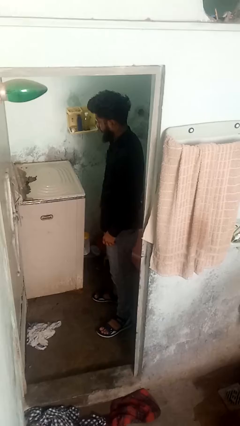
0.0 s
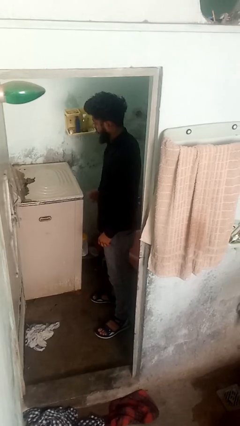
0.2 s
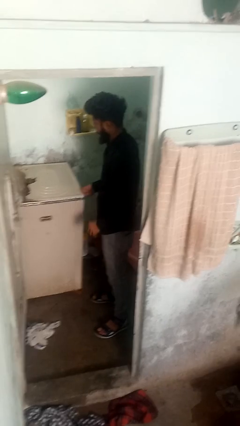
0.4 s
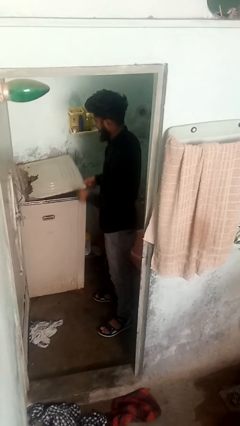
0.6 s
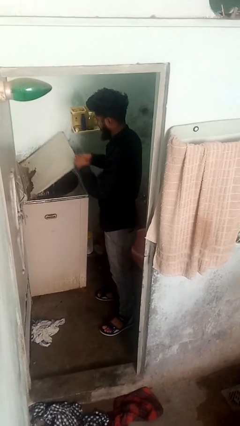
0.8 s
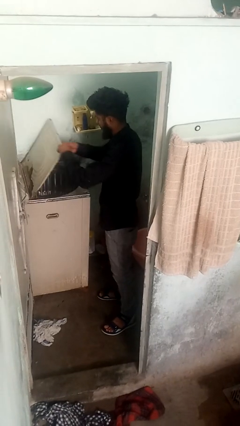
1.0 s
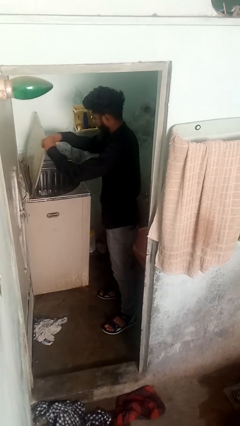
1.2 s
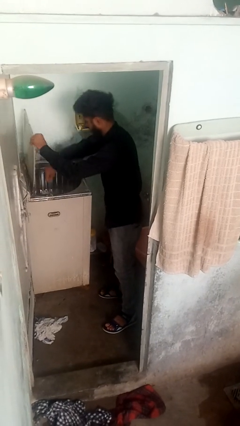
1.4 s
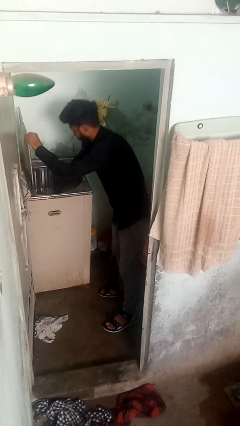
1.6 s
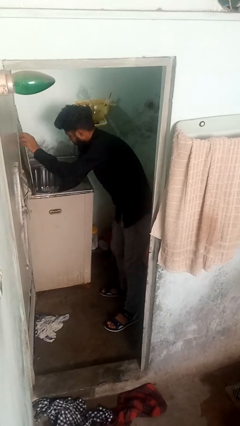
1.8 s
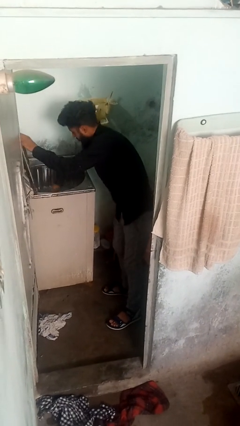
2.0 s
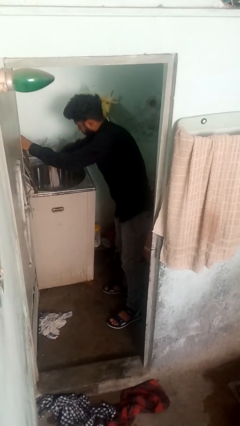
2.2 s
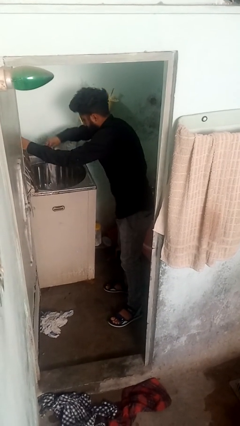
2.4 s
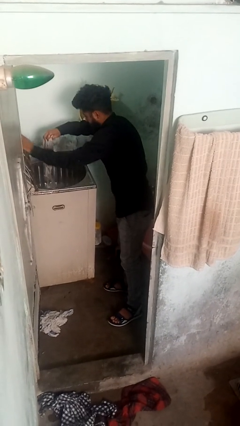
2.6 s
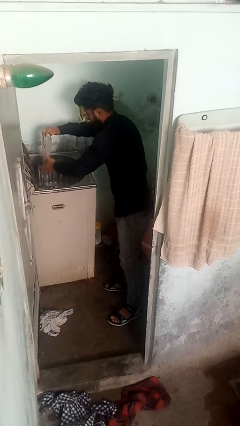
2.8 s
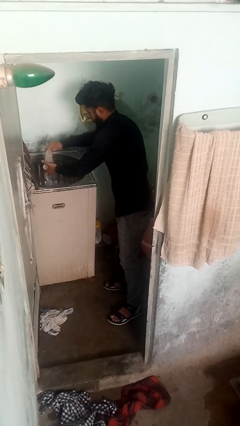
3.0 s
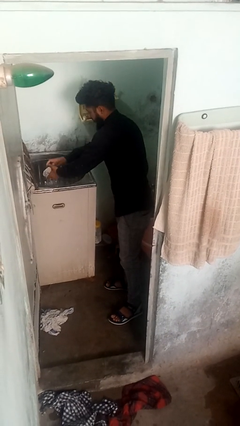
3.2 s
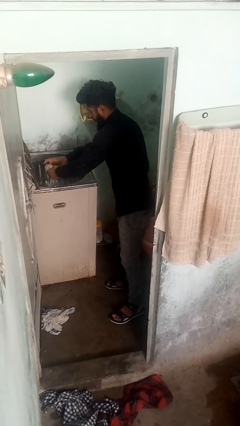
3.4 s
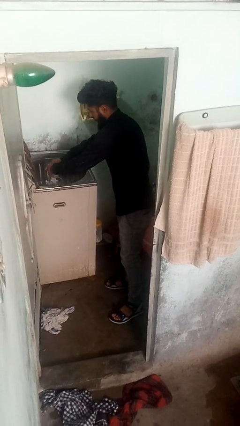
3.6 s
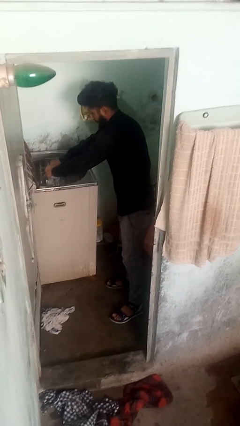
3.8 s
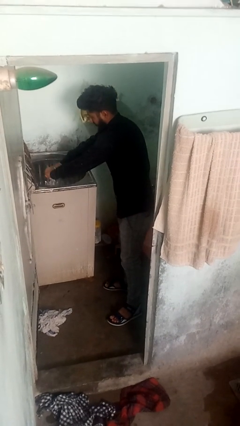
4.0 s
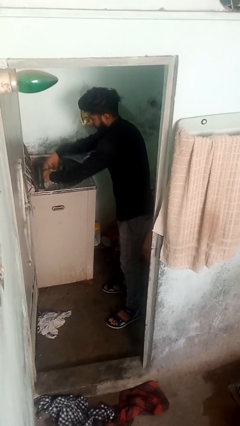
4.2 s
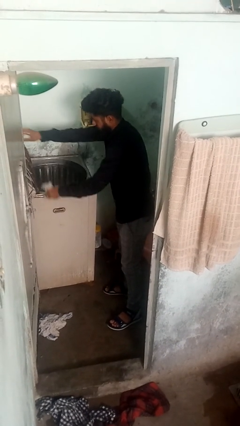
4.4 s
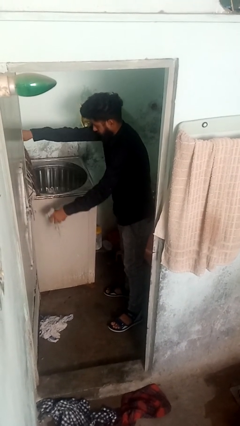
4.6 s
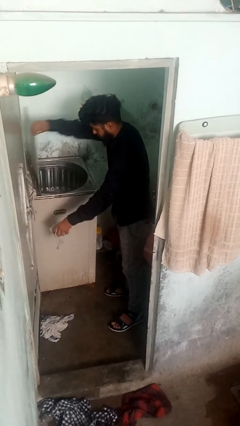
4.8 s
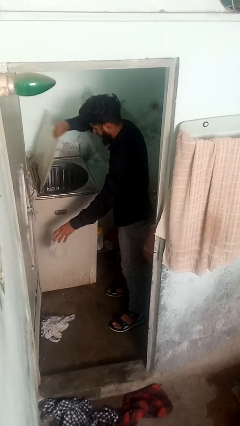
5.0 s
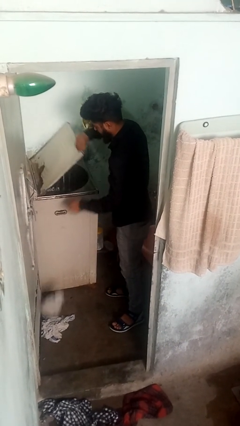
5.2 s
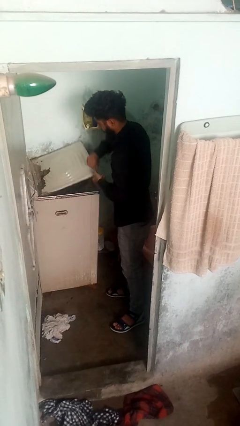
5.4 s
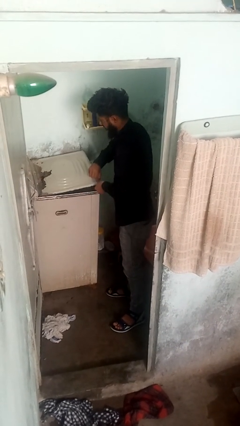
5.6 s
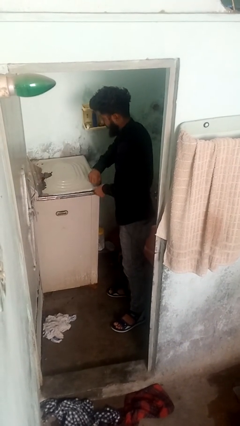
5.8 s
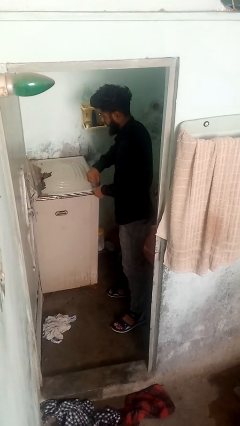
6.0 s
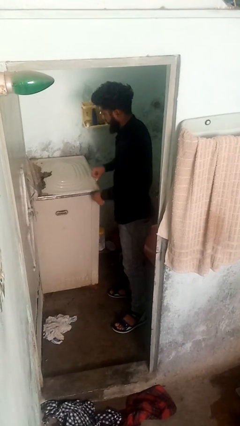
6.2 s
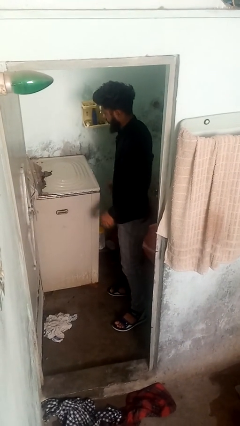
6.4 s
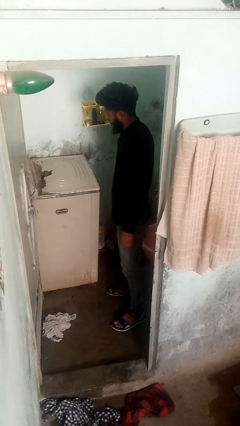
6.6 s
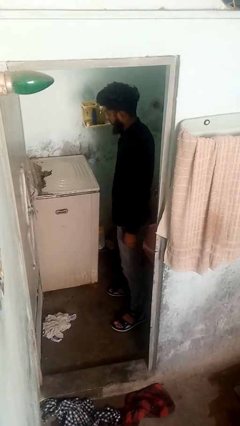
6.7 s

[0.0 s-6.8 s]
person unloads clotheswasher

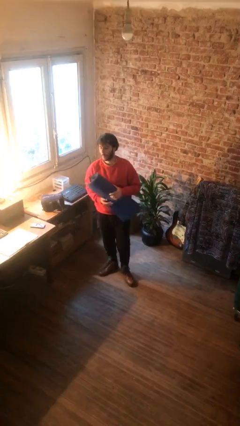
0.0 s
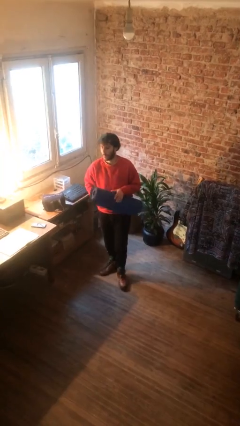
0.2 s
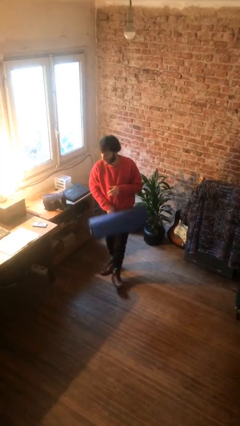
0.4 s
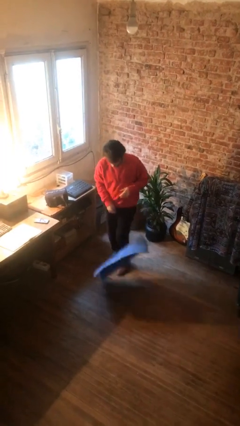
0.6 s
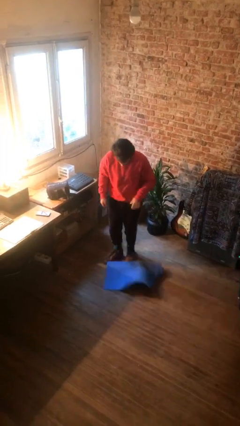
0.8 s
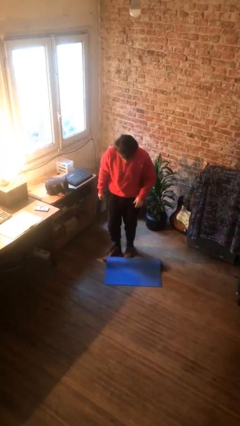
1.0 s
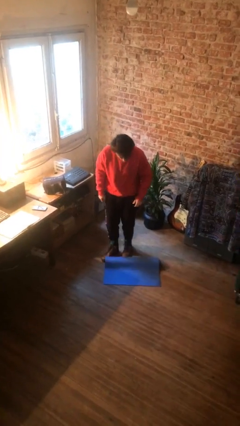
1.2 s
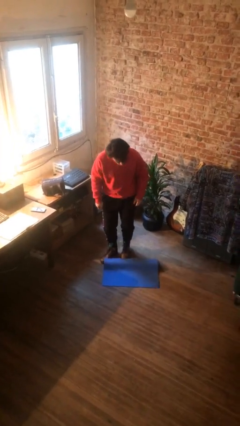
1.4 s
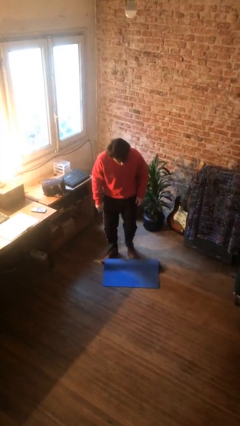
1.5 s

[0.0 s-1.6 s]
person drops object

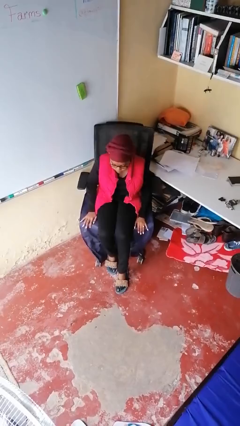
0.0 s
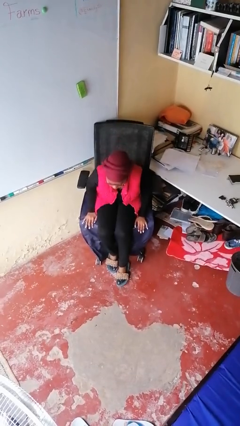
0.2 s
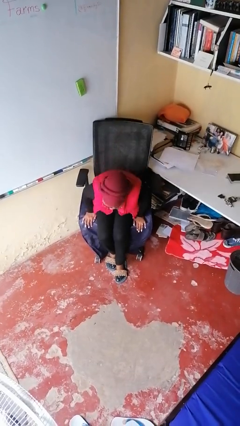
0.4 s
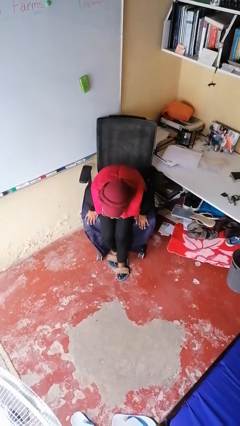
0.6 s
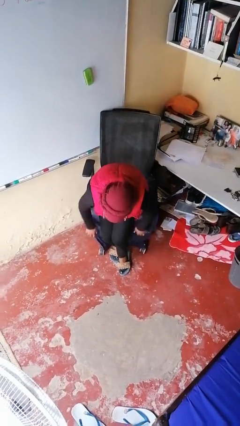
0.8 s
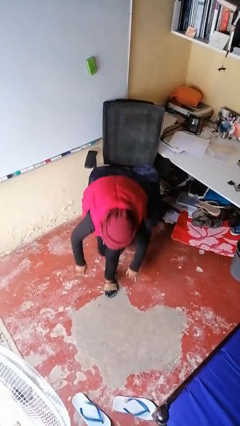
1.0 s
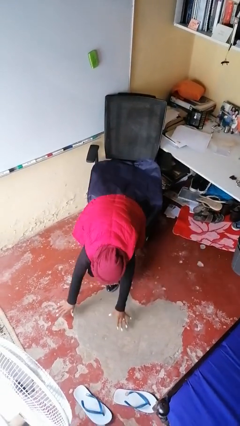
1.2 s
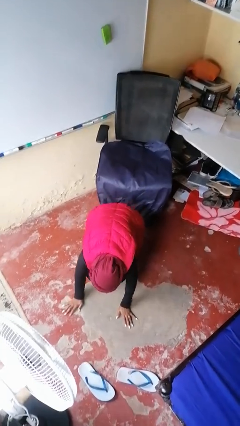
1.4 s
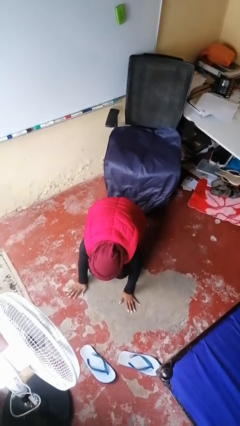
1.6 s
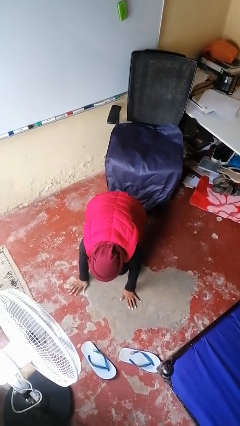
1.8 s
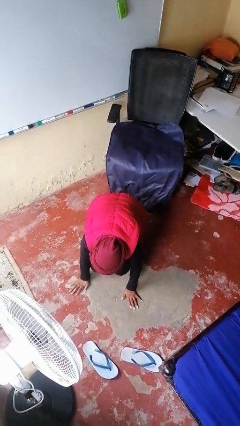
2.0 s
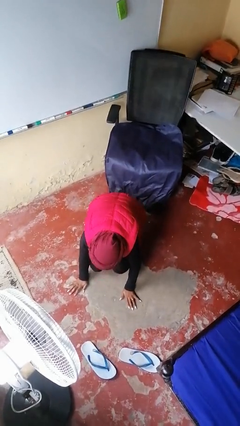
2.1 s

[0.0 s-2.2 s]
person falls from chair

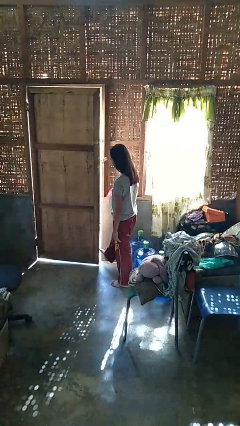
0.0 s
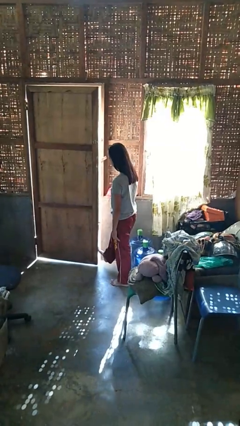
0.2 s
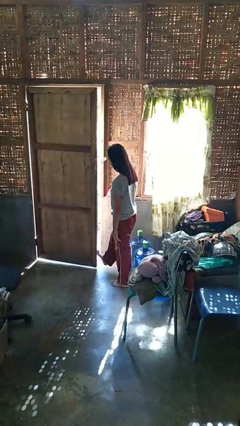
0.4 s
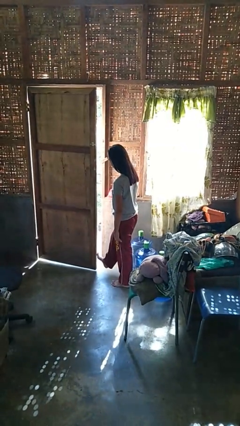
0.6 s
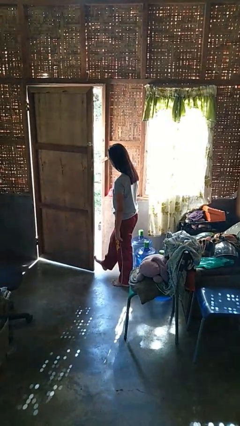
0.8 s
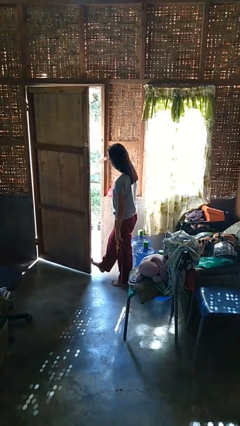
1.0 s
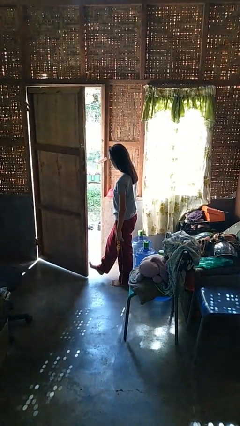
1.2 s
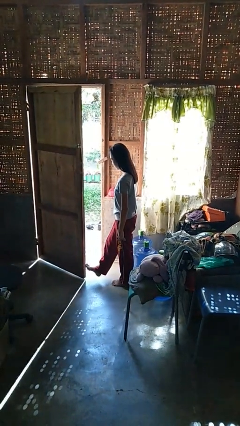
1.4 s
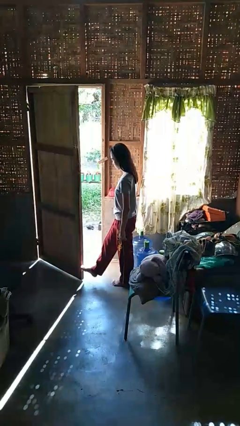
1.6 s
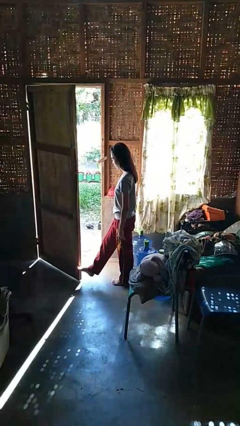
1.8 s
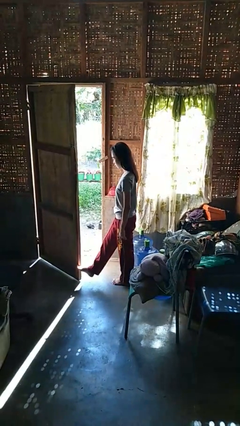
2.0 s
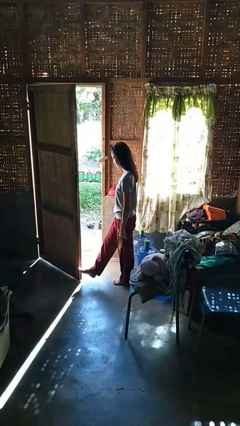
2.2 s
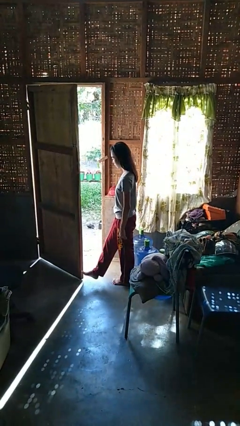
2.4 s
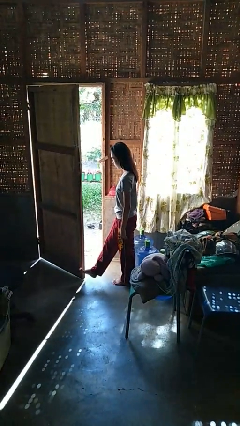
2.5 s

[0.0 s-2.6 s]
person opens facility door

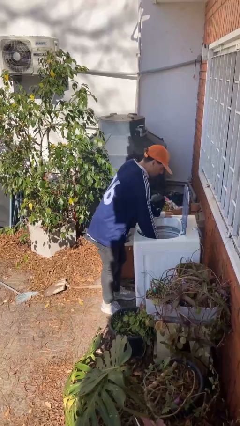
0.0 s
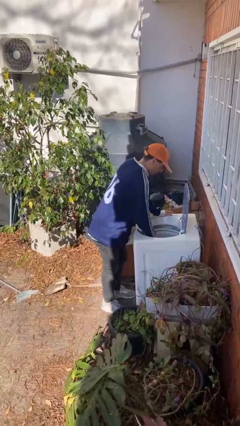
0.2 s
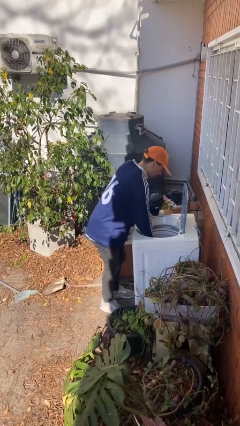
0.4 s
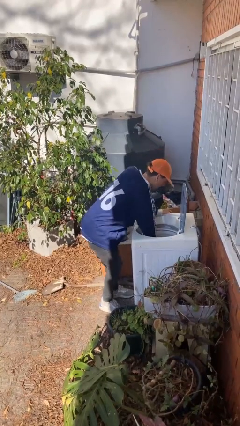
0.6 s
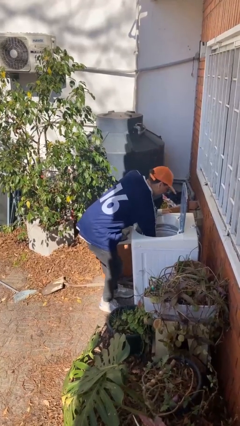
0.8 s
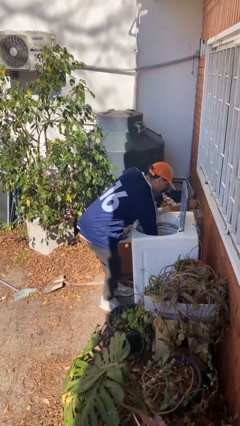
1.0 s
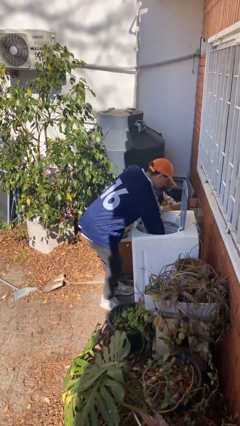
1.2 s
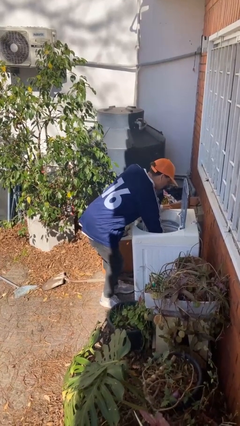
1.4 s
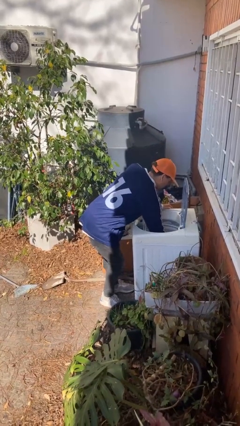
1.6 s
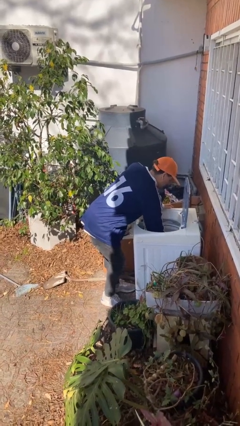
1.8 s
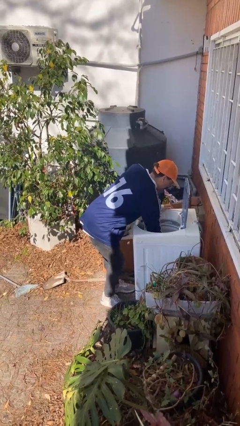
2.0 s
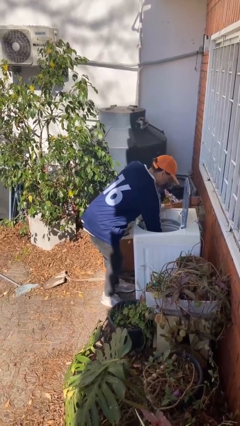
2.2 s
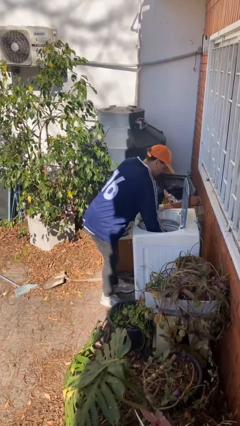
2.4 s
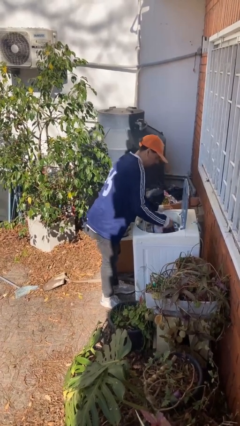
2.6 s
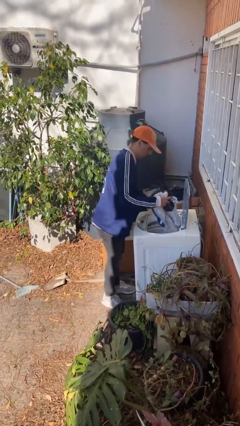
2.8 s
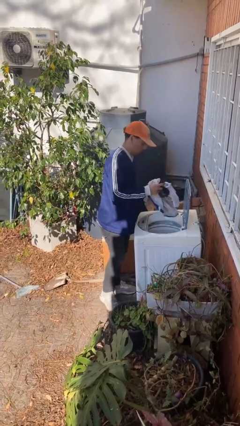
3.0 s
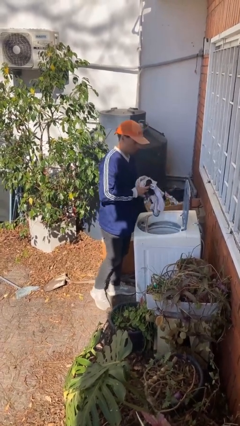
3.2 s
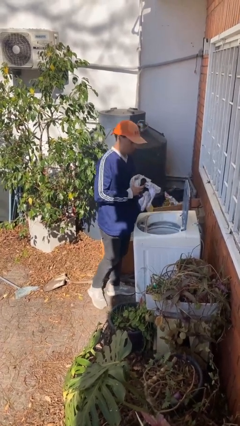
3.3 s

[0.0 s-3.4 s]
person loads clotheswasher

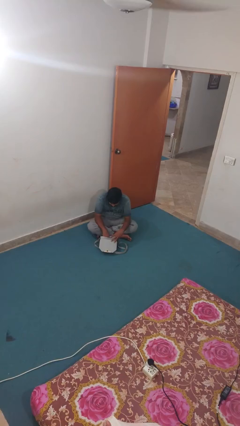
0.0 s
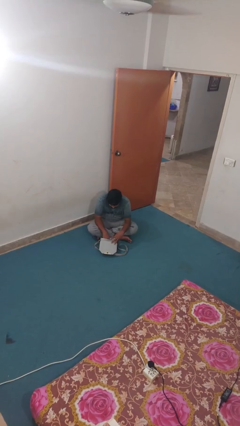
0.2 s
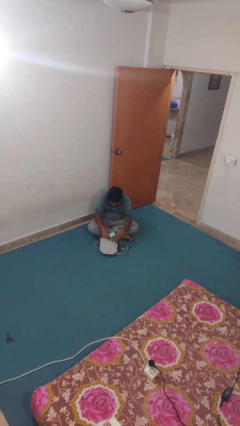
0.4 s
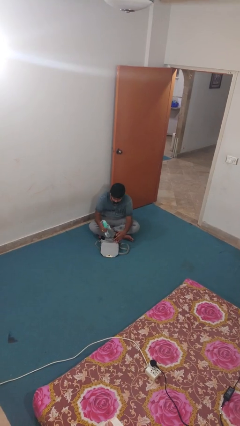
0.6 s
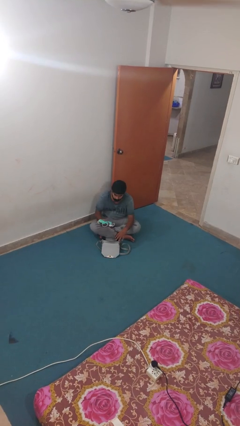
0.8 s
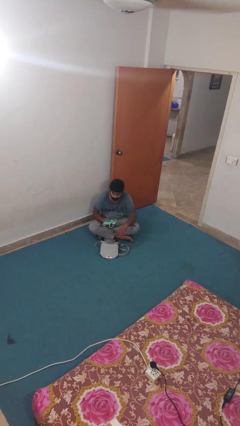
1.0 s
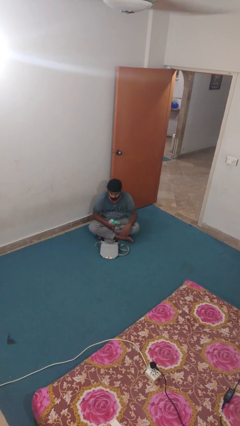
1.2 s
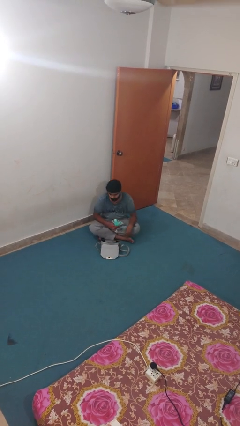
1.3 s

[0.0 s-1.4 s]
person takes object from purse
